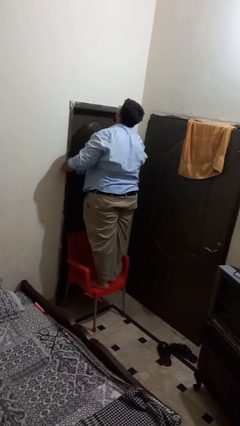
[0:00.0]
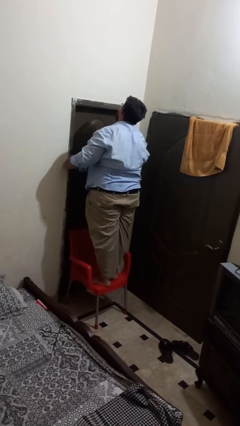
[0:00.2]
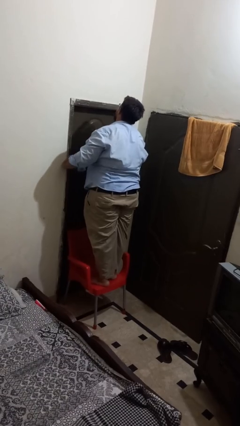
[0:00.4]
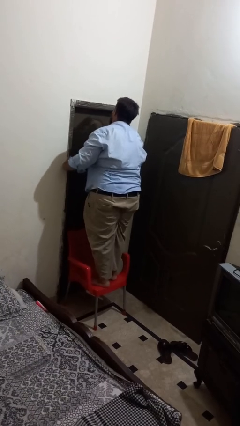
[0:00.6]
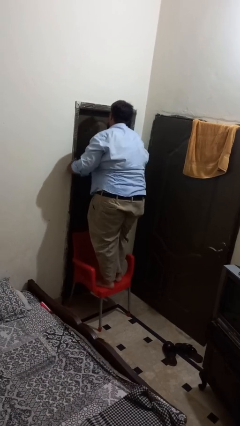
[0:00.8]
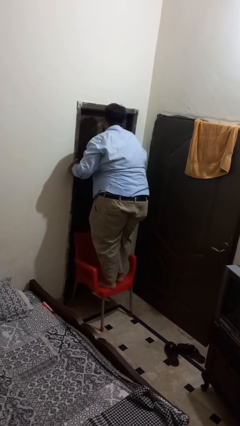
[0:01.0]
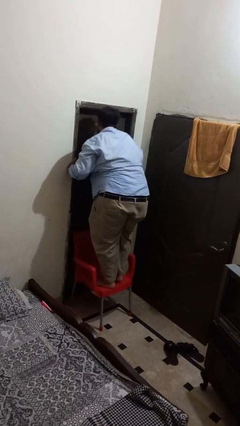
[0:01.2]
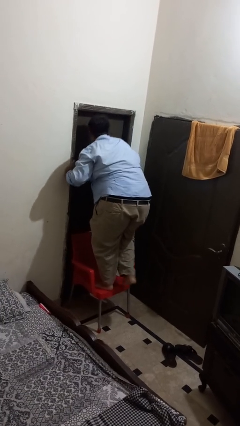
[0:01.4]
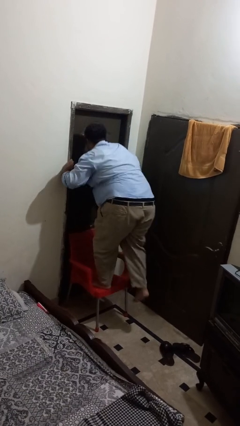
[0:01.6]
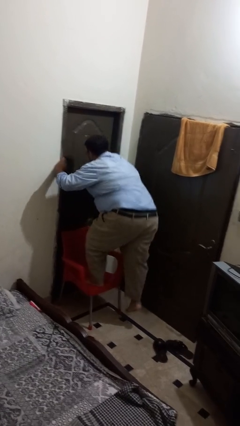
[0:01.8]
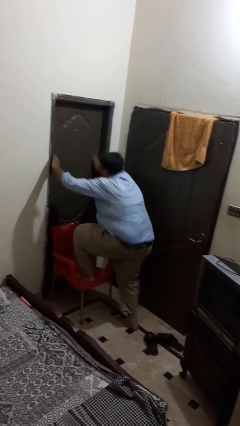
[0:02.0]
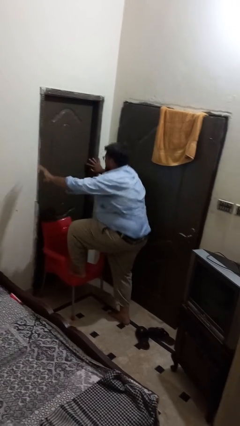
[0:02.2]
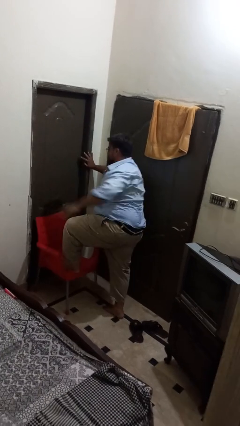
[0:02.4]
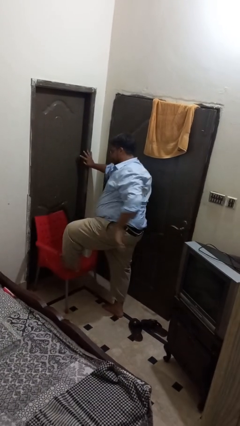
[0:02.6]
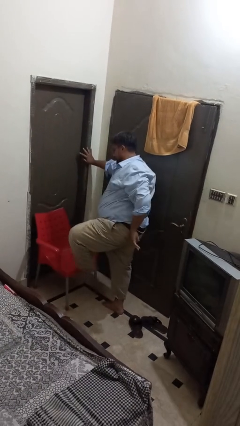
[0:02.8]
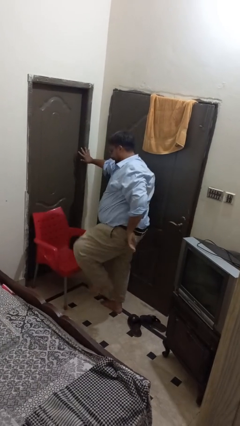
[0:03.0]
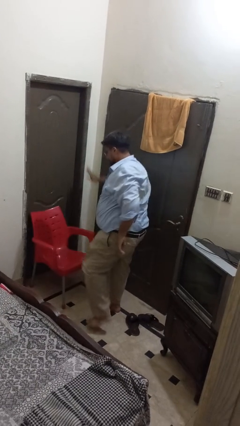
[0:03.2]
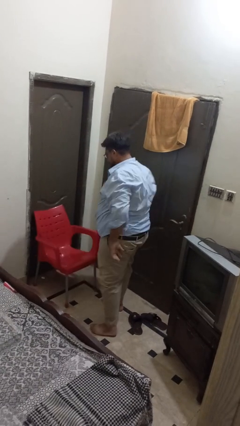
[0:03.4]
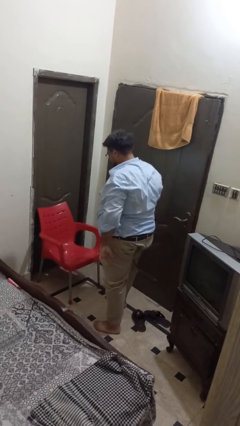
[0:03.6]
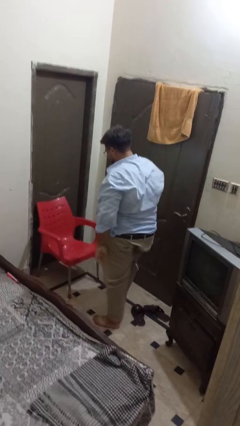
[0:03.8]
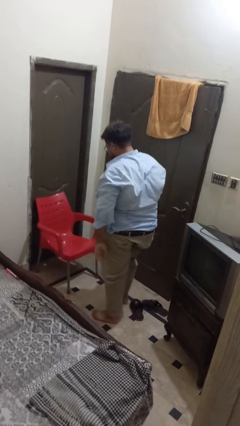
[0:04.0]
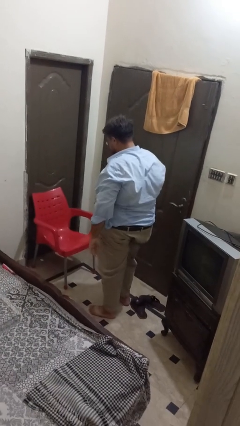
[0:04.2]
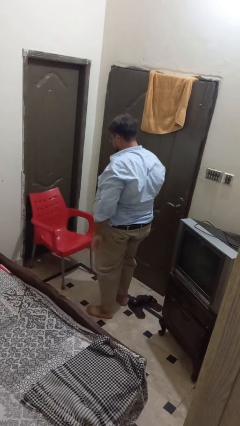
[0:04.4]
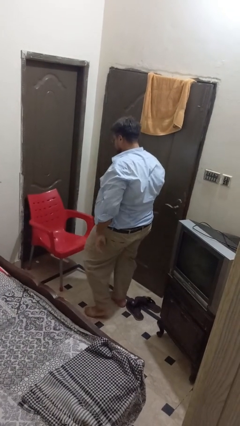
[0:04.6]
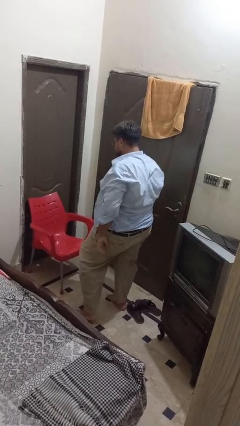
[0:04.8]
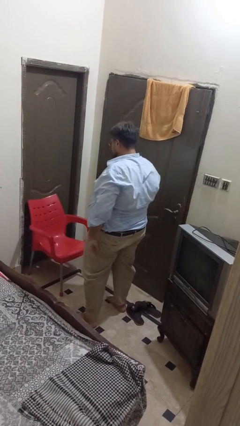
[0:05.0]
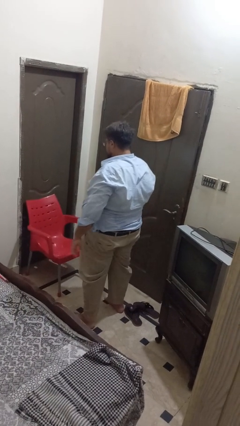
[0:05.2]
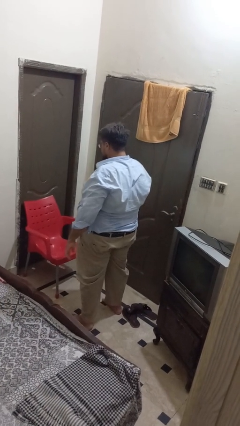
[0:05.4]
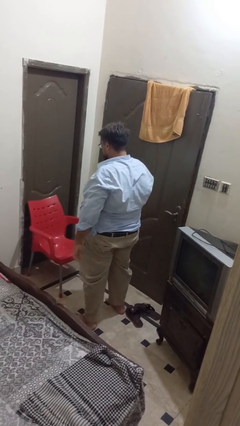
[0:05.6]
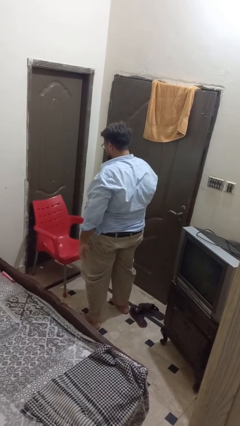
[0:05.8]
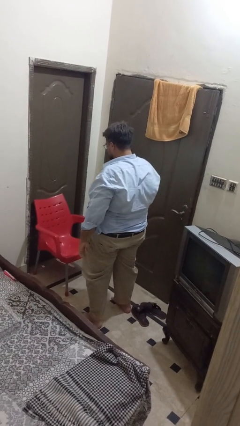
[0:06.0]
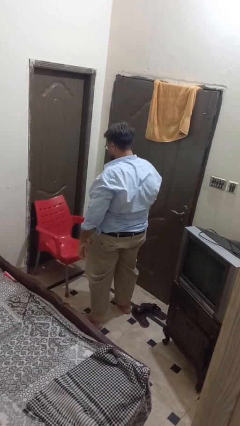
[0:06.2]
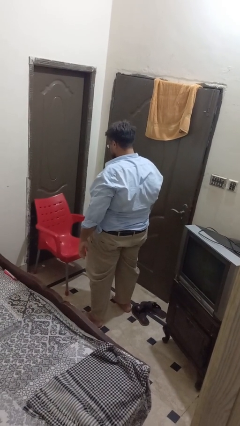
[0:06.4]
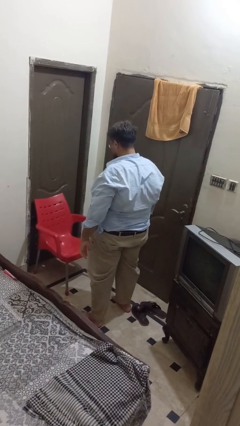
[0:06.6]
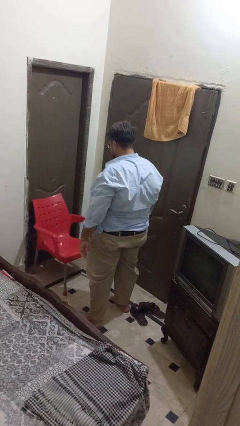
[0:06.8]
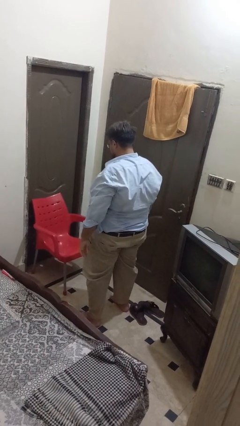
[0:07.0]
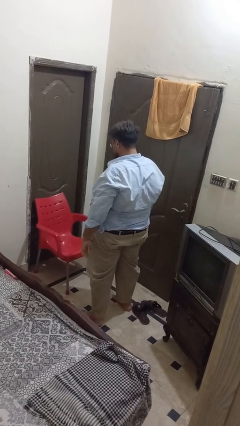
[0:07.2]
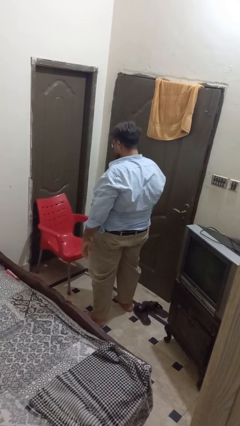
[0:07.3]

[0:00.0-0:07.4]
person climbs off chair

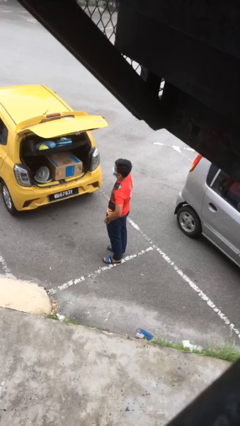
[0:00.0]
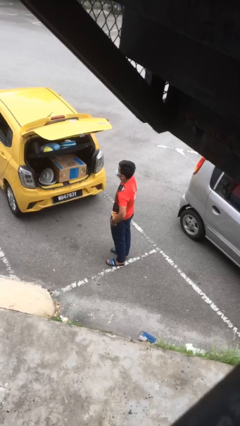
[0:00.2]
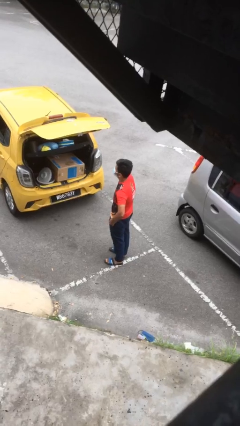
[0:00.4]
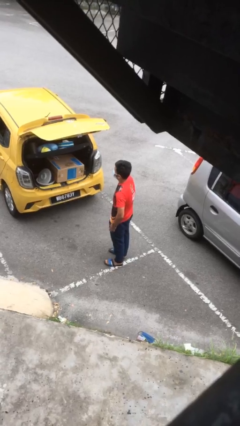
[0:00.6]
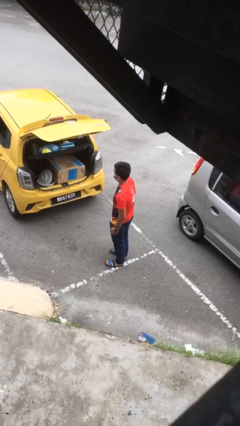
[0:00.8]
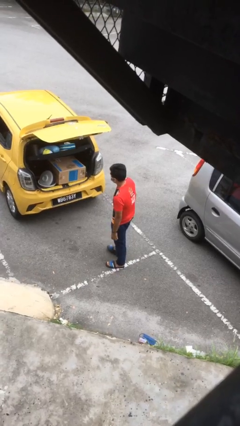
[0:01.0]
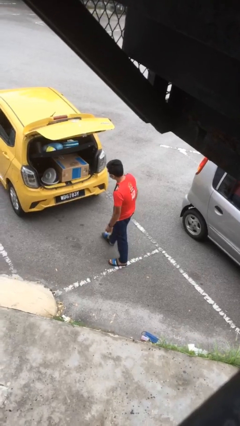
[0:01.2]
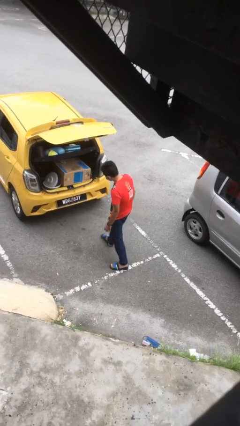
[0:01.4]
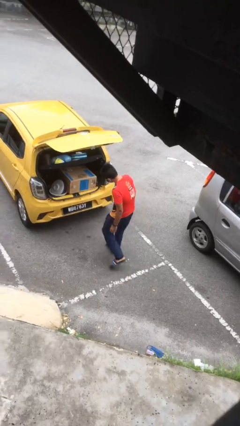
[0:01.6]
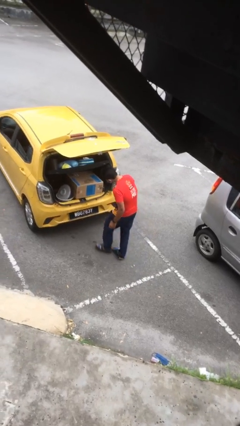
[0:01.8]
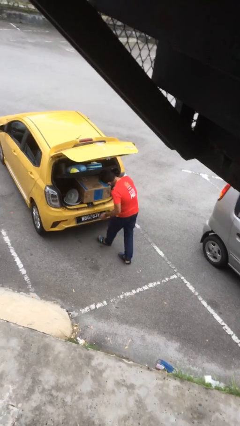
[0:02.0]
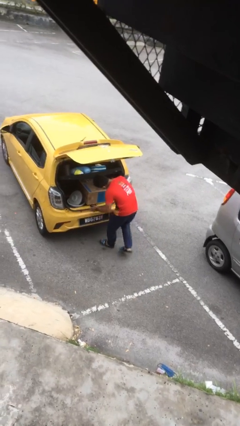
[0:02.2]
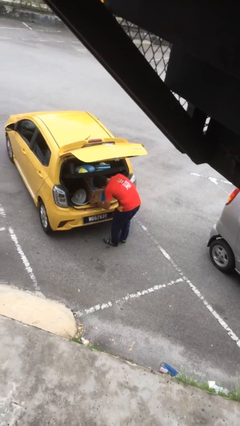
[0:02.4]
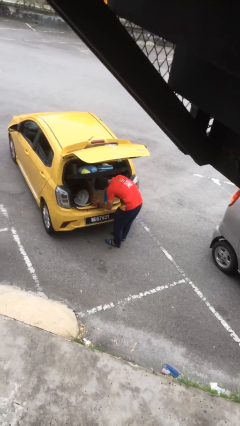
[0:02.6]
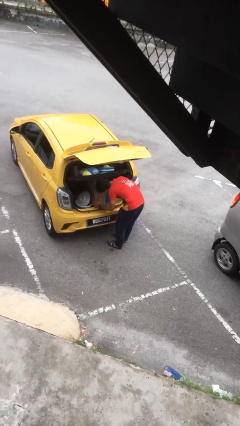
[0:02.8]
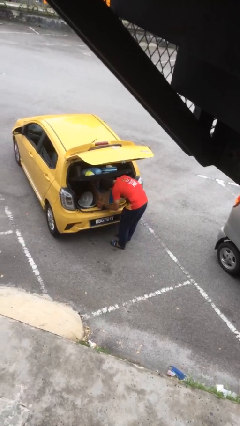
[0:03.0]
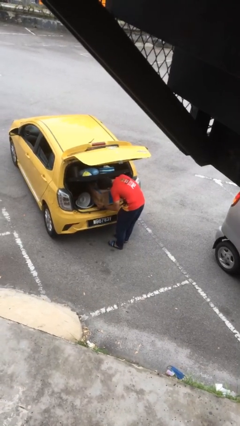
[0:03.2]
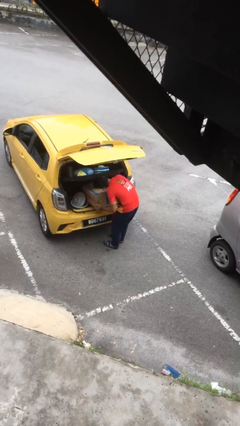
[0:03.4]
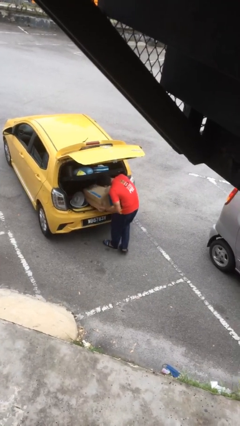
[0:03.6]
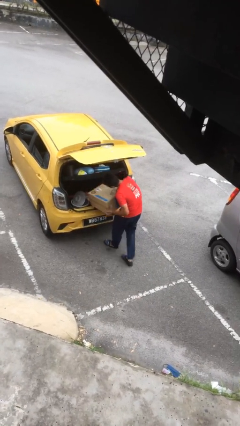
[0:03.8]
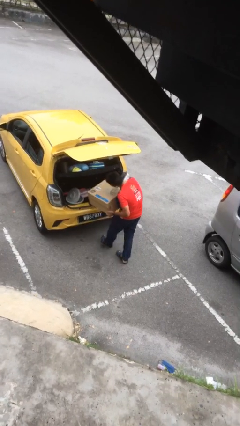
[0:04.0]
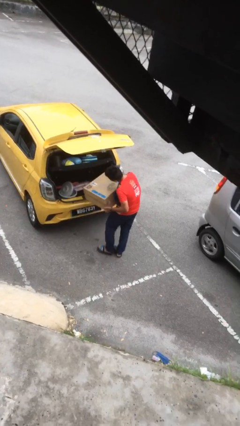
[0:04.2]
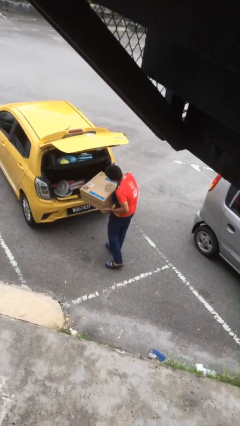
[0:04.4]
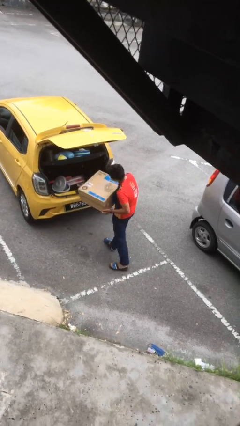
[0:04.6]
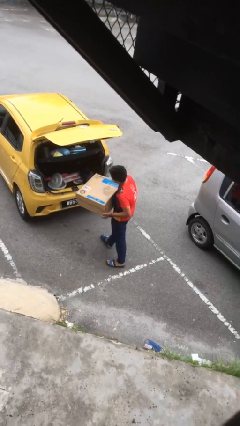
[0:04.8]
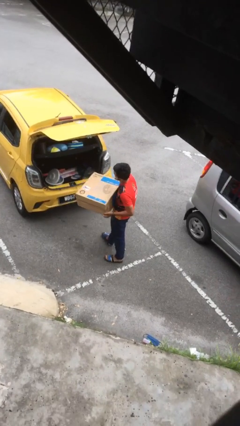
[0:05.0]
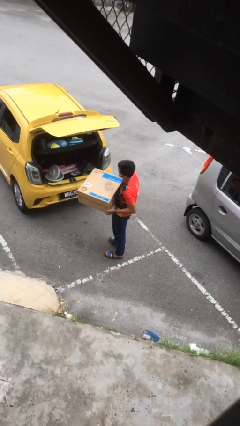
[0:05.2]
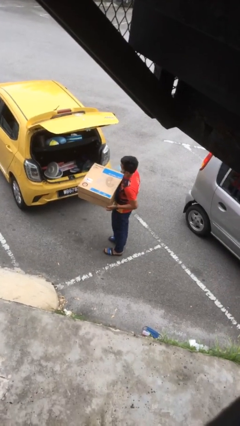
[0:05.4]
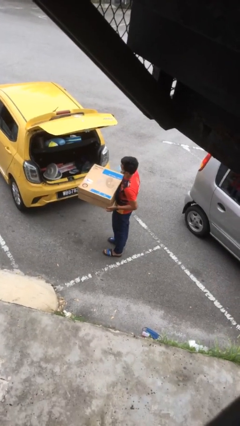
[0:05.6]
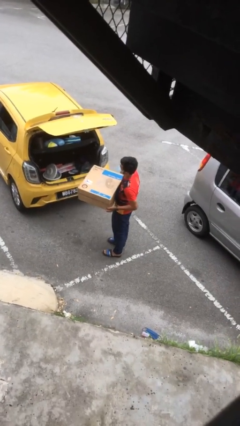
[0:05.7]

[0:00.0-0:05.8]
person unloads car

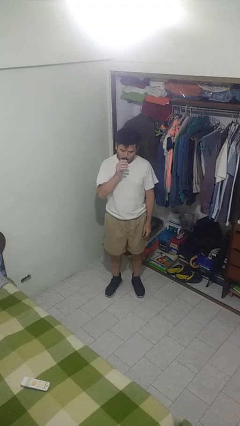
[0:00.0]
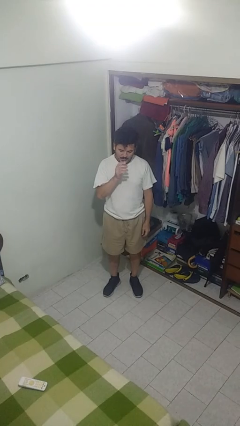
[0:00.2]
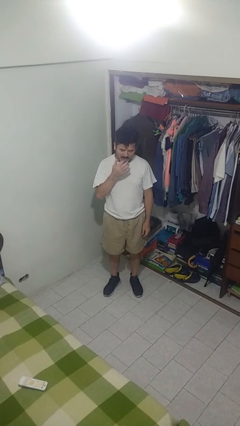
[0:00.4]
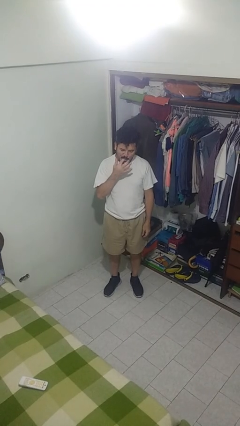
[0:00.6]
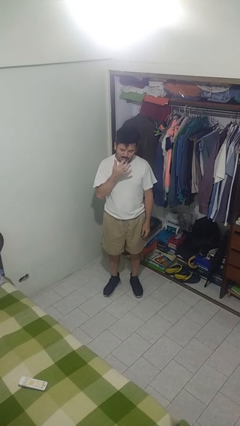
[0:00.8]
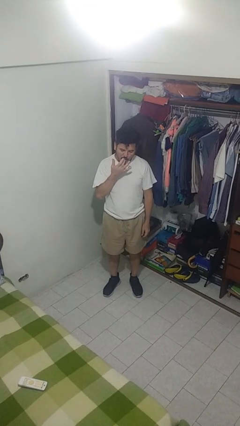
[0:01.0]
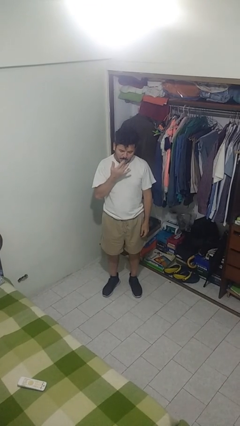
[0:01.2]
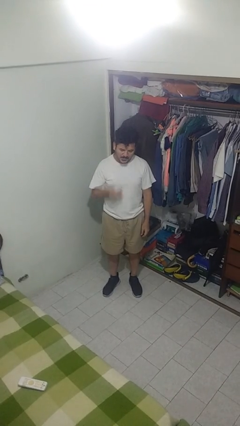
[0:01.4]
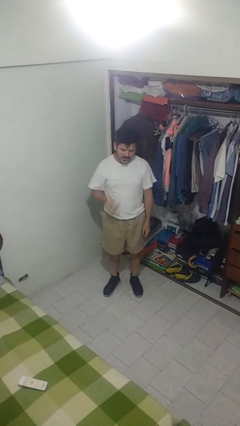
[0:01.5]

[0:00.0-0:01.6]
person licks fingers

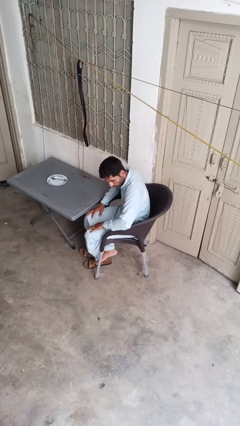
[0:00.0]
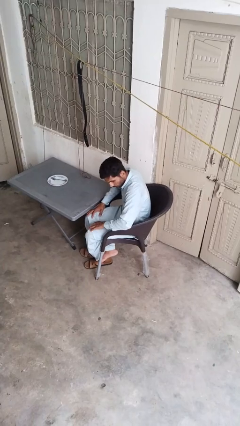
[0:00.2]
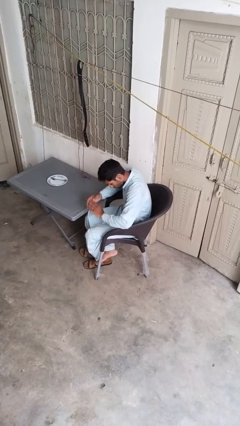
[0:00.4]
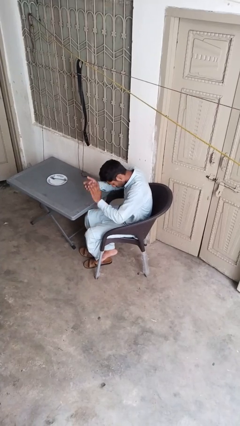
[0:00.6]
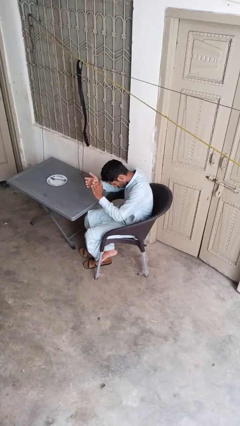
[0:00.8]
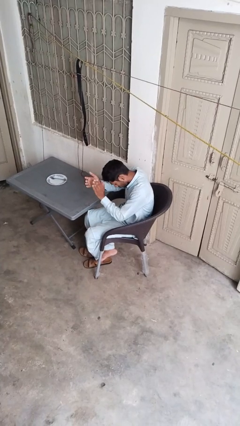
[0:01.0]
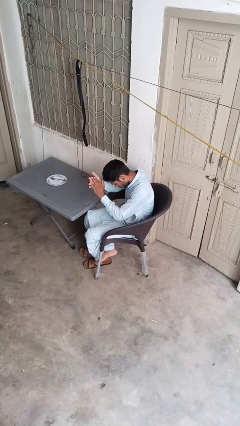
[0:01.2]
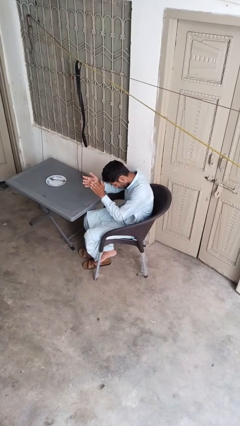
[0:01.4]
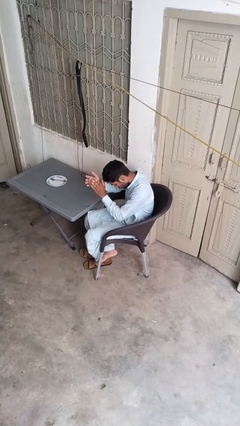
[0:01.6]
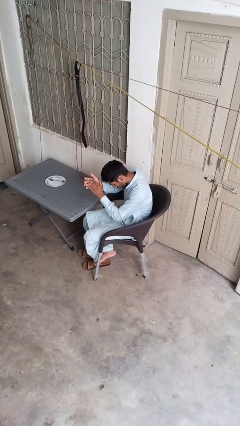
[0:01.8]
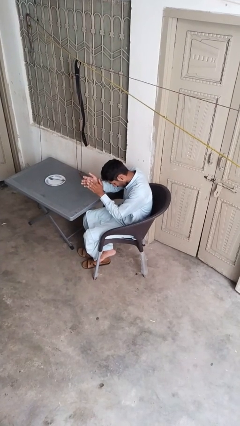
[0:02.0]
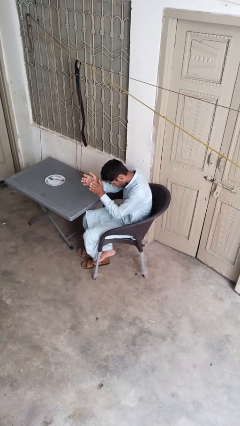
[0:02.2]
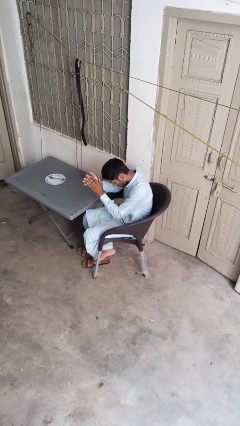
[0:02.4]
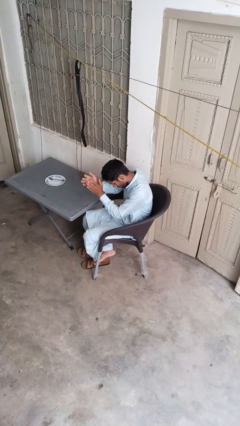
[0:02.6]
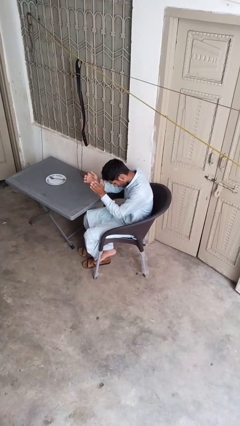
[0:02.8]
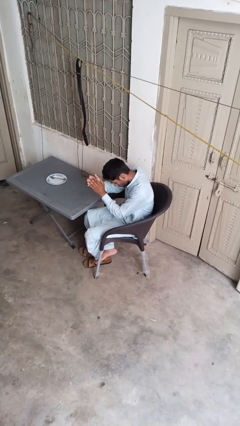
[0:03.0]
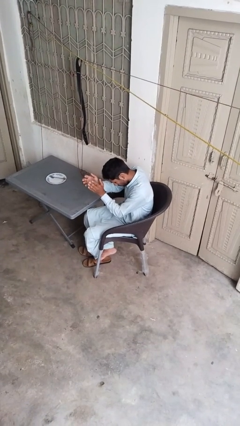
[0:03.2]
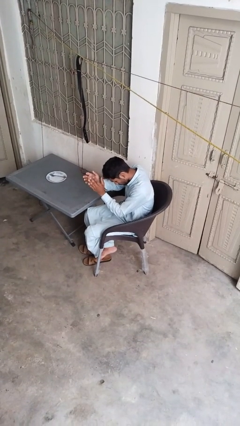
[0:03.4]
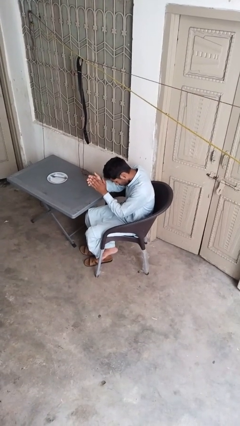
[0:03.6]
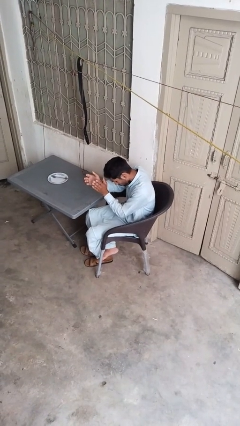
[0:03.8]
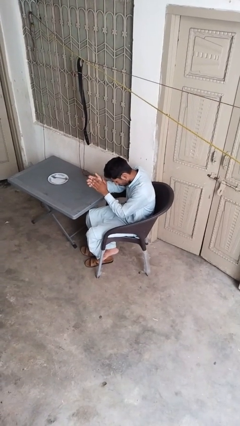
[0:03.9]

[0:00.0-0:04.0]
person claps hands
